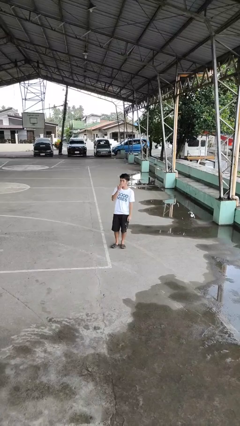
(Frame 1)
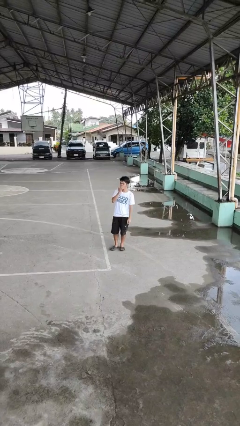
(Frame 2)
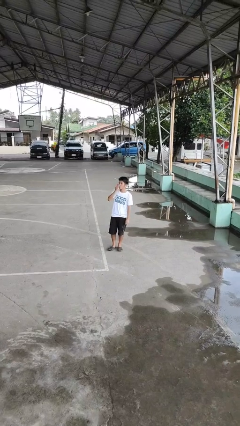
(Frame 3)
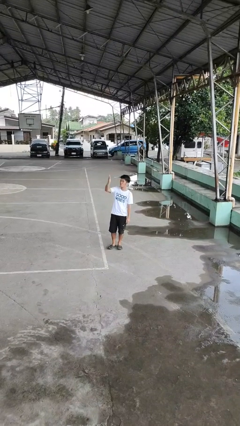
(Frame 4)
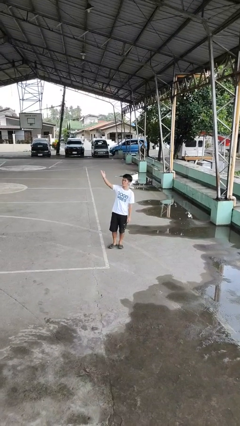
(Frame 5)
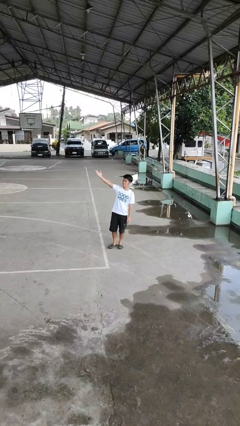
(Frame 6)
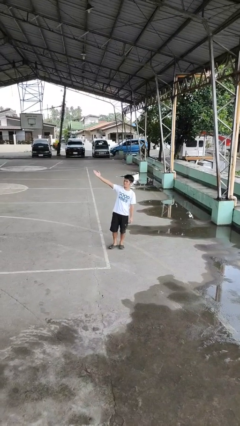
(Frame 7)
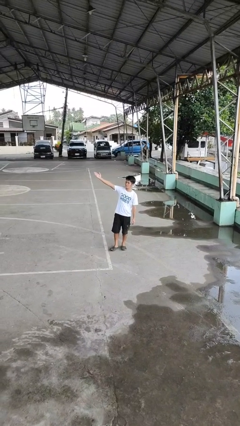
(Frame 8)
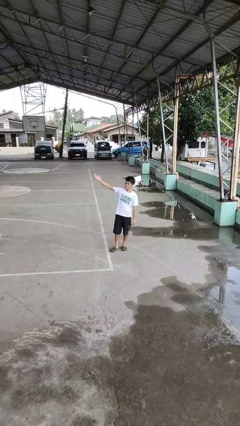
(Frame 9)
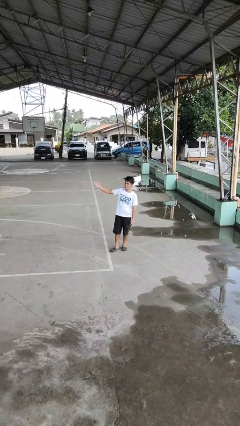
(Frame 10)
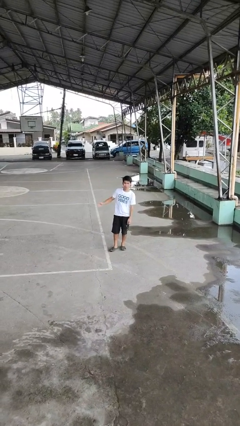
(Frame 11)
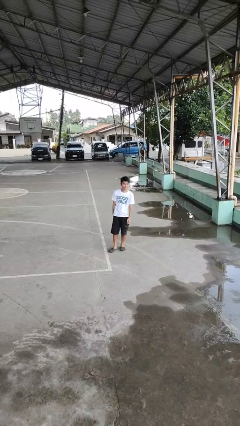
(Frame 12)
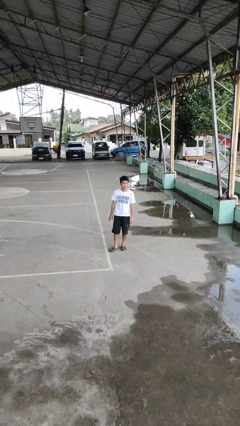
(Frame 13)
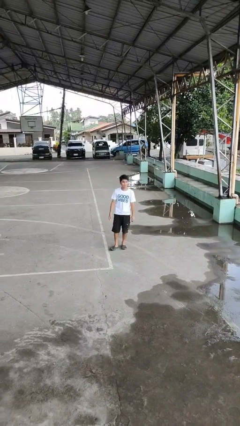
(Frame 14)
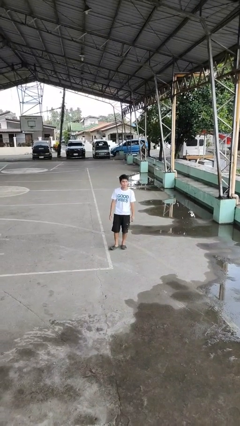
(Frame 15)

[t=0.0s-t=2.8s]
person gestures blow kiss

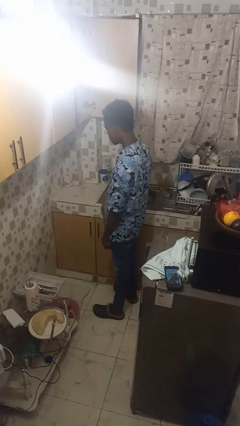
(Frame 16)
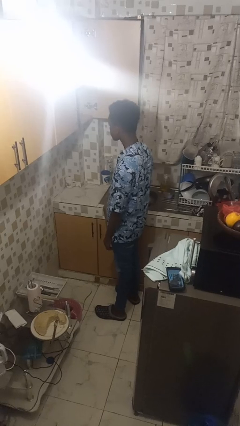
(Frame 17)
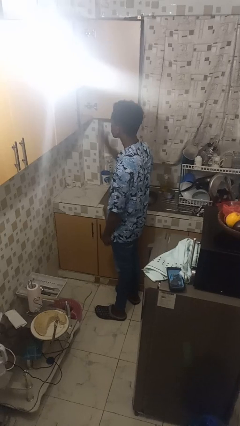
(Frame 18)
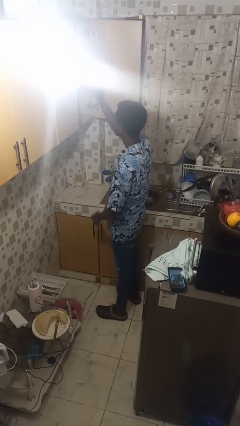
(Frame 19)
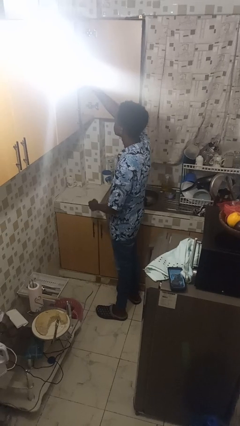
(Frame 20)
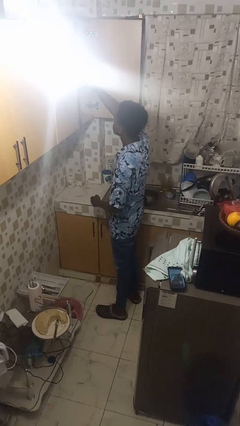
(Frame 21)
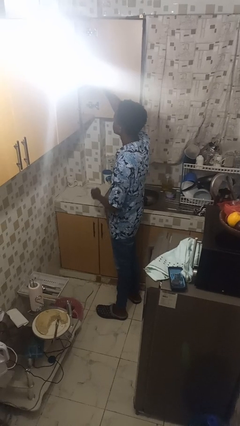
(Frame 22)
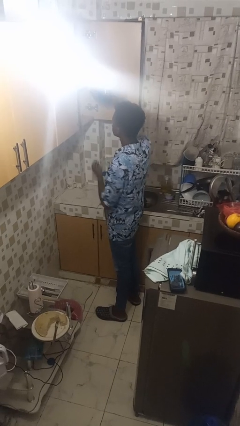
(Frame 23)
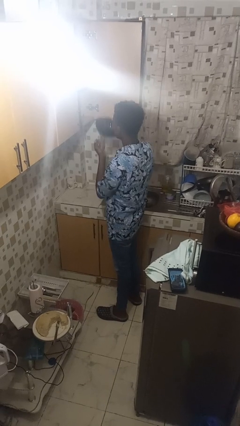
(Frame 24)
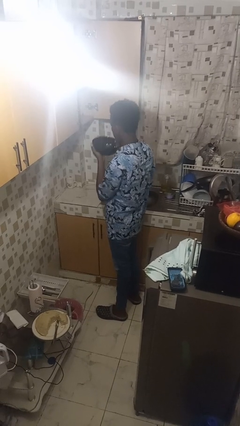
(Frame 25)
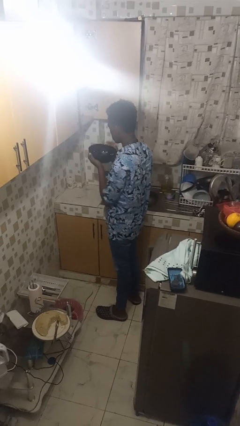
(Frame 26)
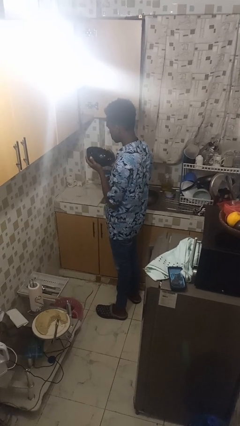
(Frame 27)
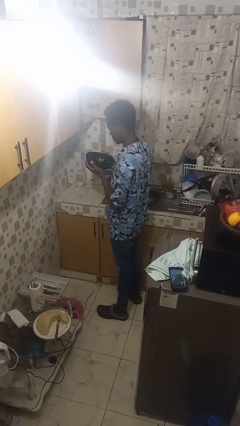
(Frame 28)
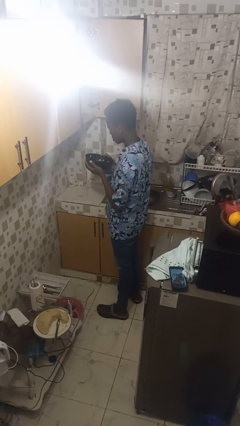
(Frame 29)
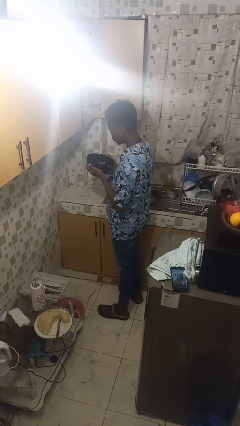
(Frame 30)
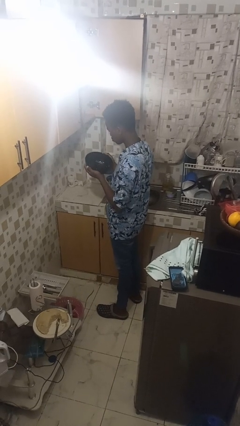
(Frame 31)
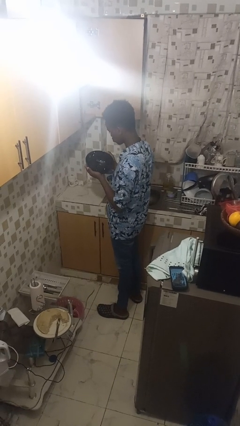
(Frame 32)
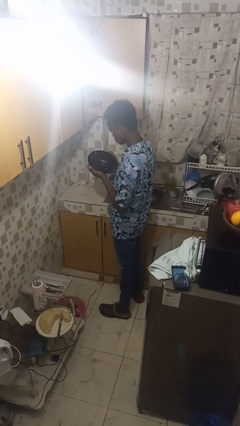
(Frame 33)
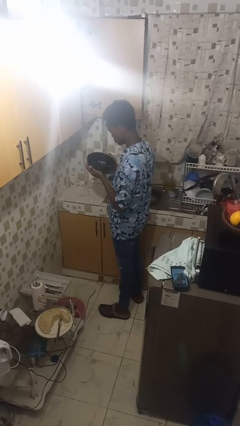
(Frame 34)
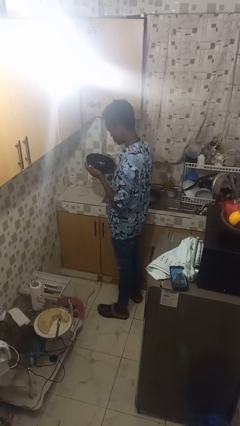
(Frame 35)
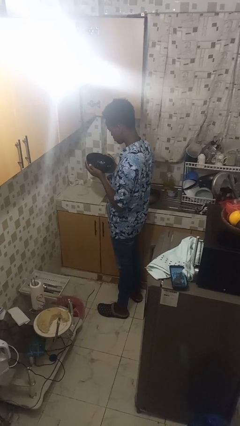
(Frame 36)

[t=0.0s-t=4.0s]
person picks up object from cabinet

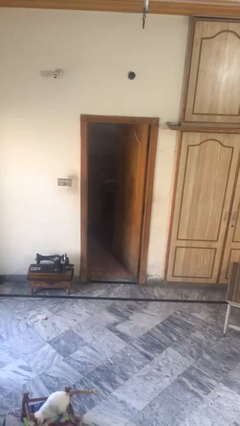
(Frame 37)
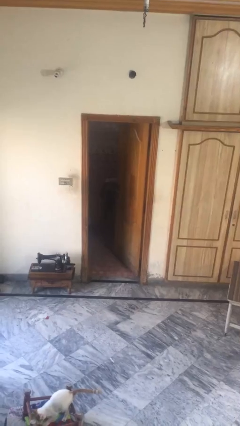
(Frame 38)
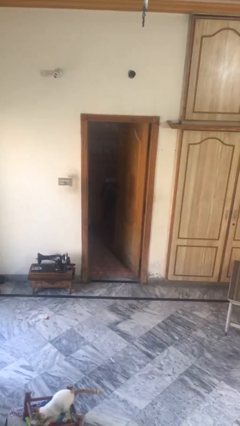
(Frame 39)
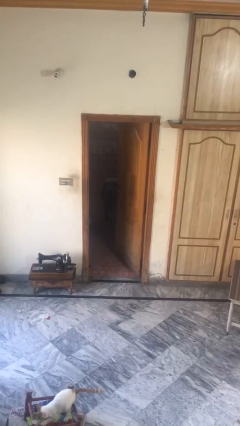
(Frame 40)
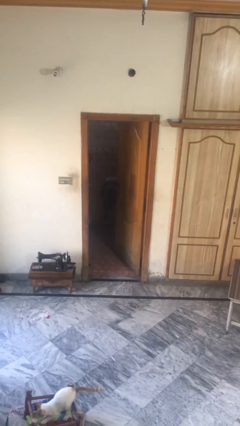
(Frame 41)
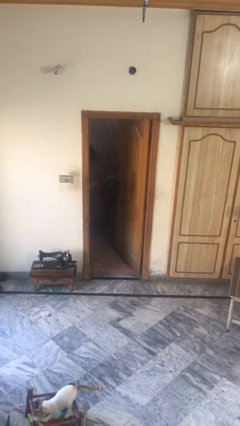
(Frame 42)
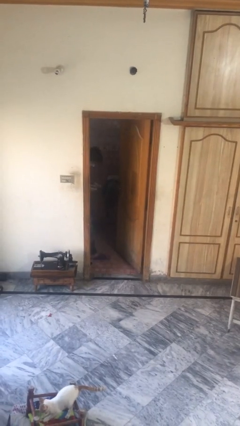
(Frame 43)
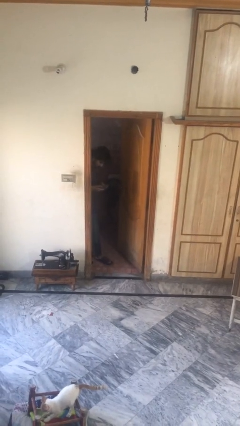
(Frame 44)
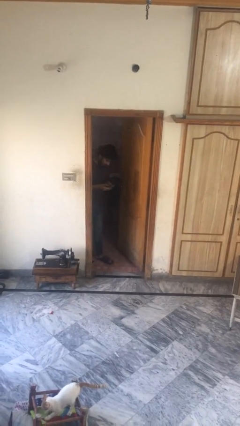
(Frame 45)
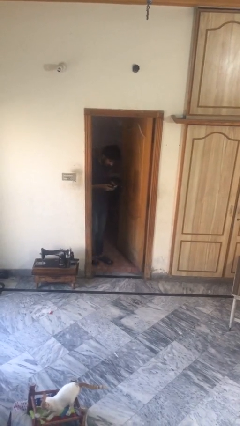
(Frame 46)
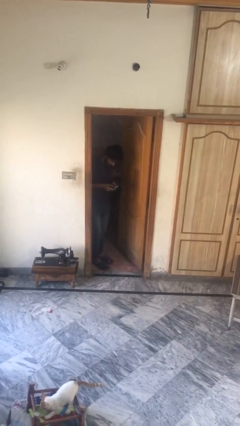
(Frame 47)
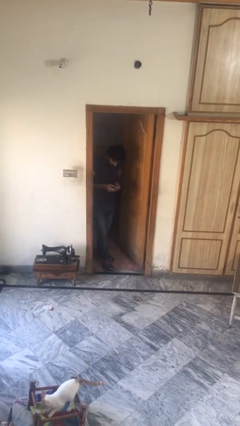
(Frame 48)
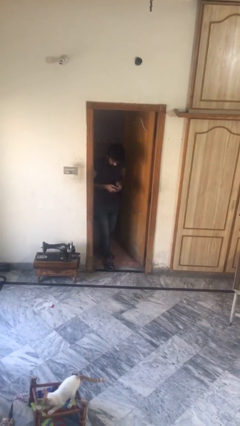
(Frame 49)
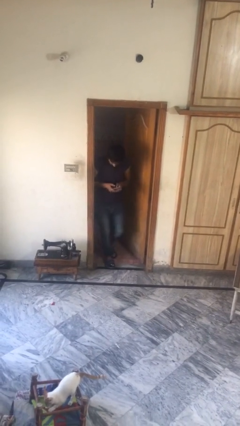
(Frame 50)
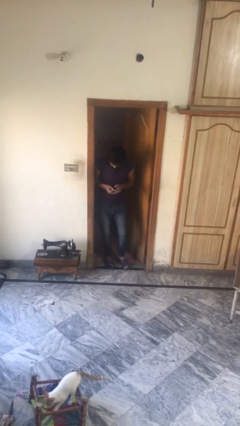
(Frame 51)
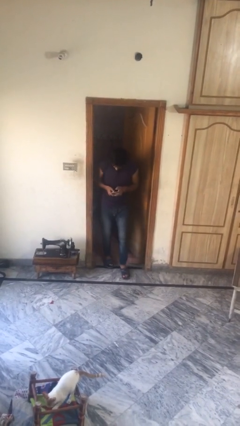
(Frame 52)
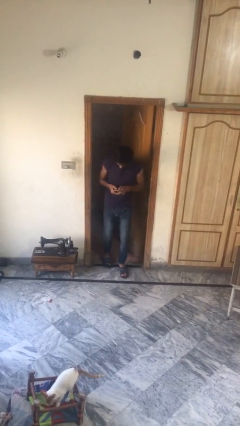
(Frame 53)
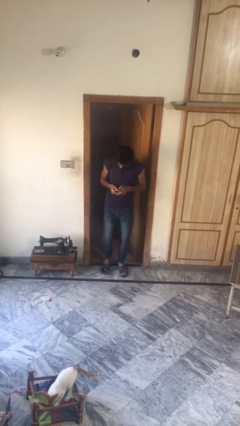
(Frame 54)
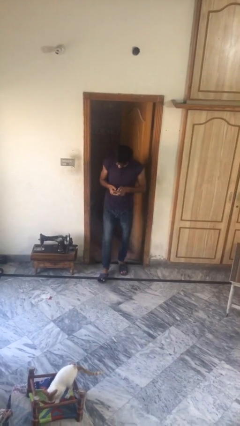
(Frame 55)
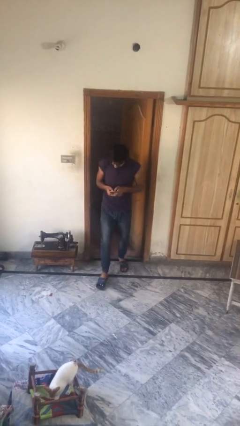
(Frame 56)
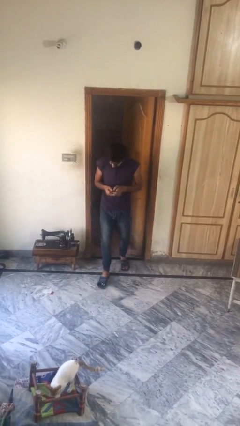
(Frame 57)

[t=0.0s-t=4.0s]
person enters scene through structure

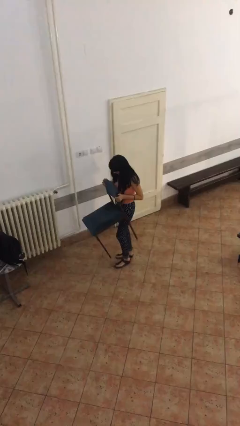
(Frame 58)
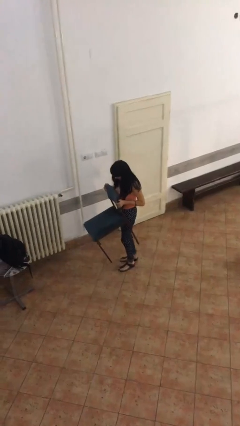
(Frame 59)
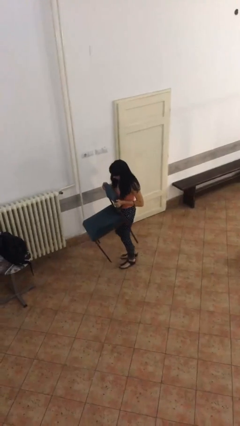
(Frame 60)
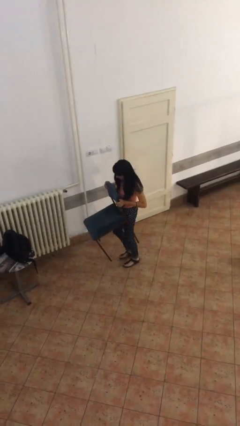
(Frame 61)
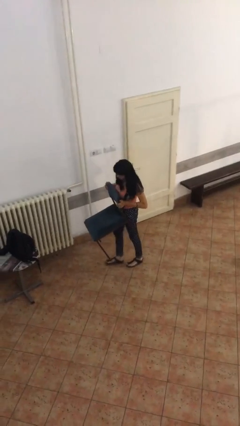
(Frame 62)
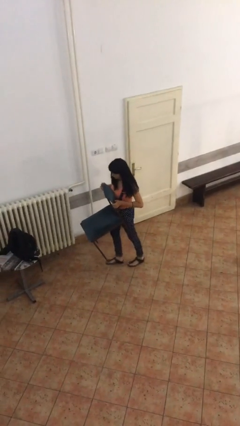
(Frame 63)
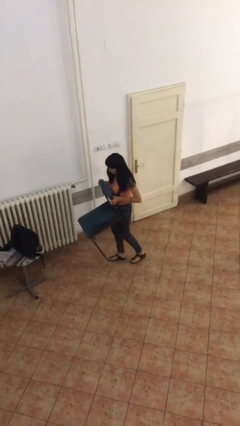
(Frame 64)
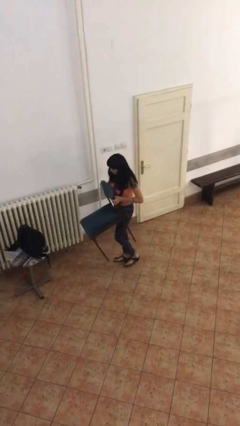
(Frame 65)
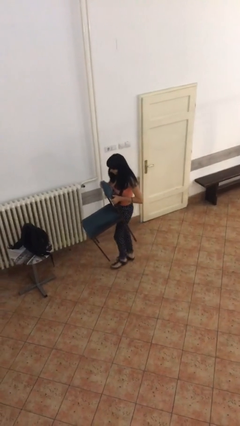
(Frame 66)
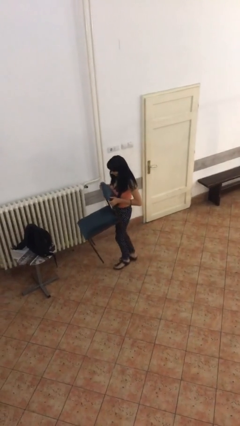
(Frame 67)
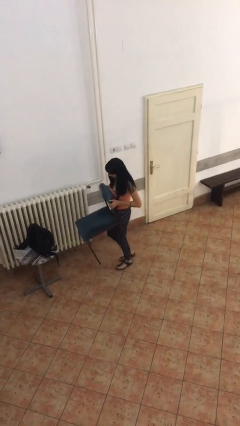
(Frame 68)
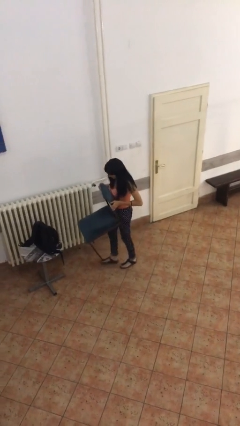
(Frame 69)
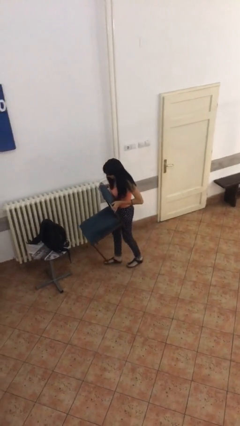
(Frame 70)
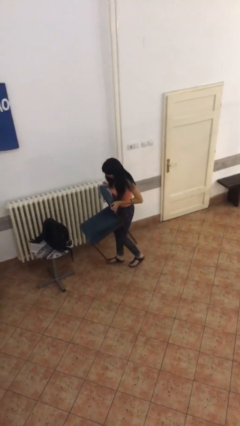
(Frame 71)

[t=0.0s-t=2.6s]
person carries heavy object

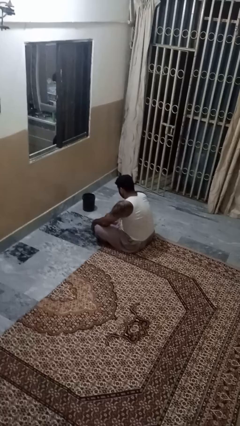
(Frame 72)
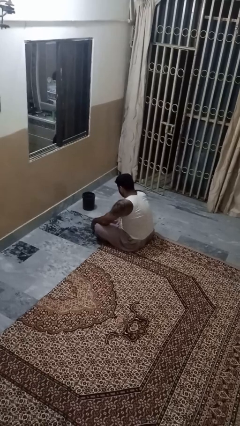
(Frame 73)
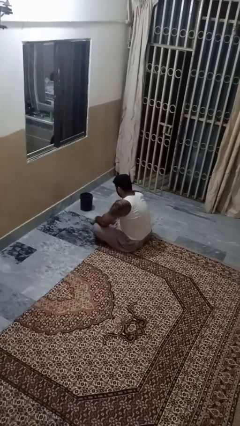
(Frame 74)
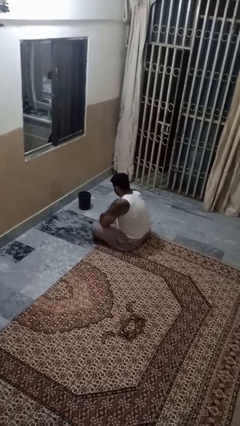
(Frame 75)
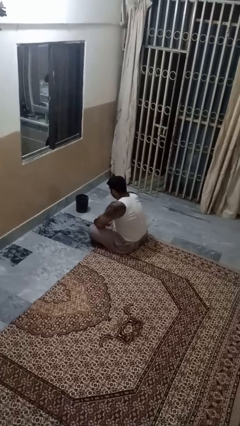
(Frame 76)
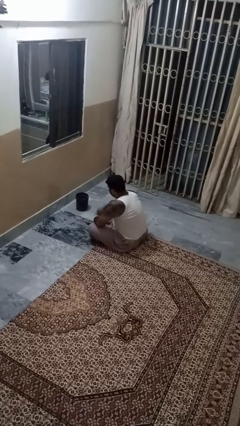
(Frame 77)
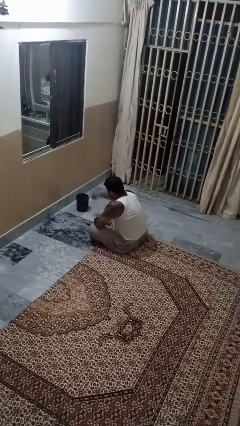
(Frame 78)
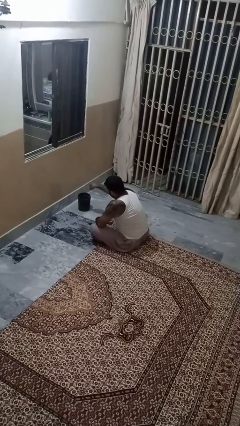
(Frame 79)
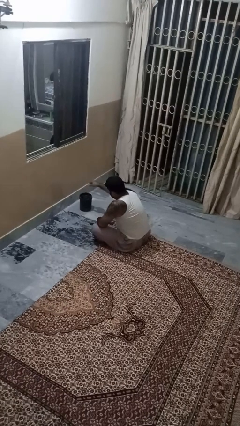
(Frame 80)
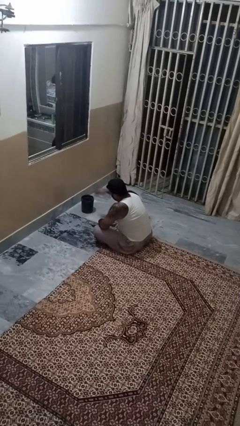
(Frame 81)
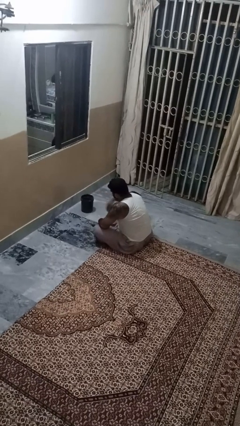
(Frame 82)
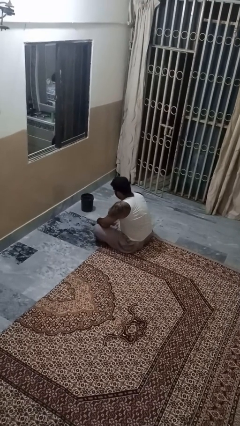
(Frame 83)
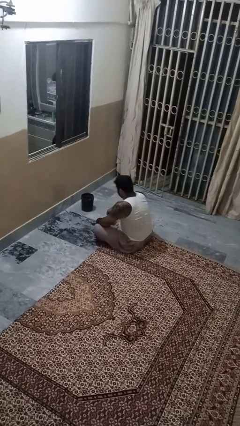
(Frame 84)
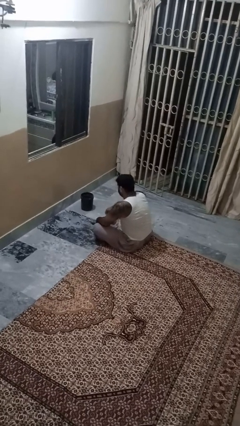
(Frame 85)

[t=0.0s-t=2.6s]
person discards trash

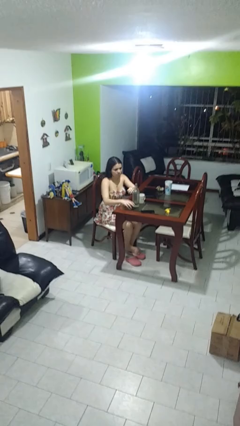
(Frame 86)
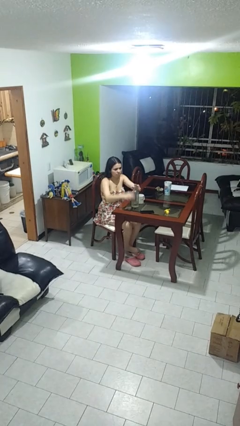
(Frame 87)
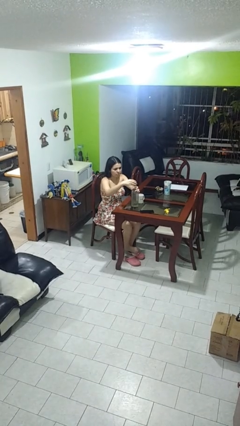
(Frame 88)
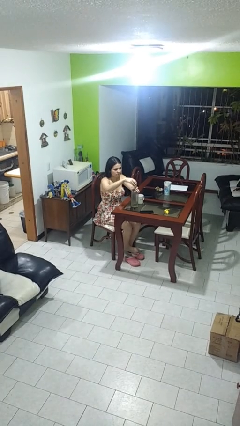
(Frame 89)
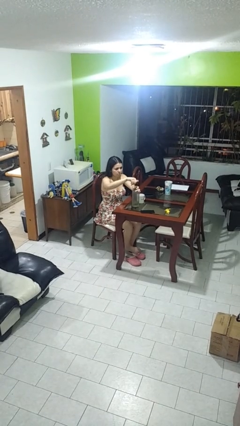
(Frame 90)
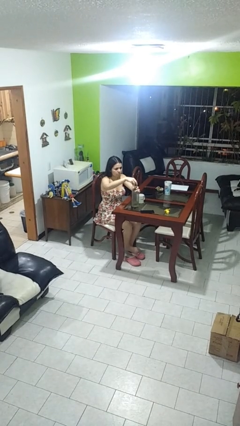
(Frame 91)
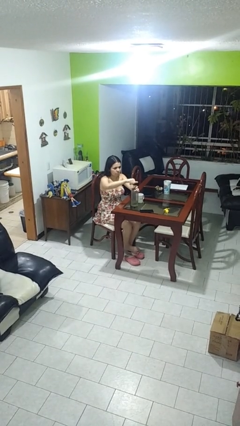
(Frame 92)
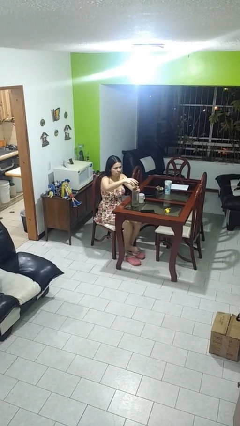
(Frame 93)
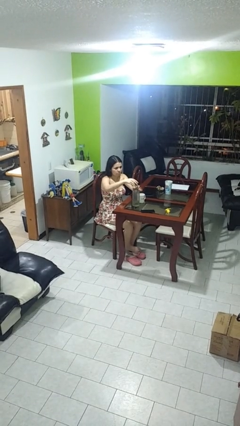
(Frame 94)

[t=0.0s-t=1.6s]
person screws lid to bottle
